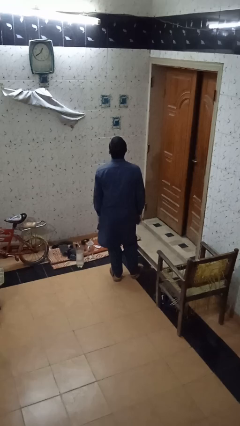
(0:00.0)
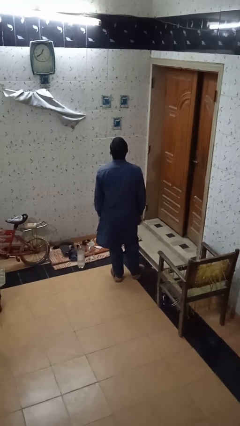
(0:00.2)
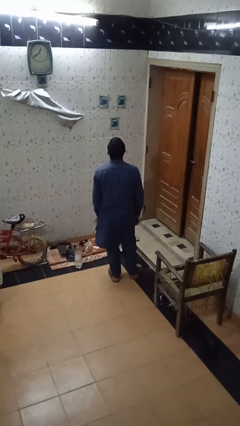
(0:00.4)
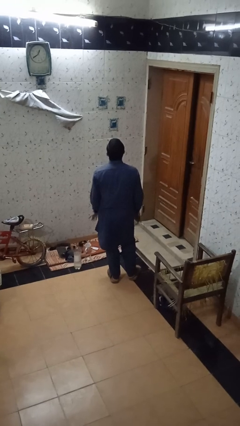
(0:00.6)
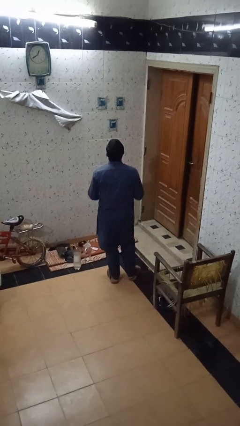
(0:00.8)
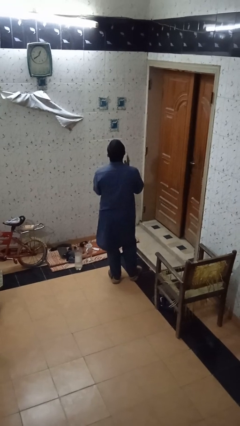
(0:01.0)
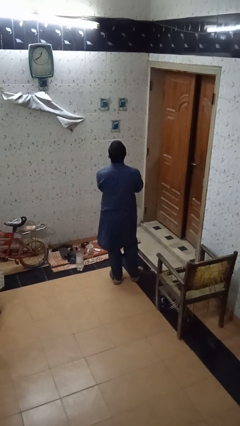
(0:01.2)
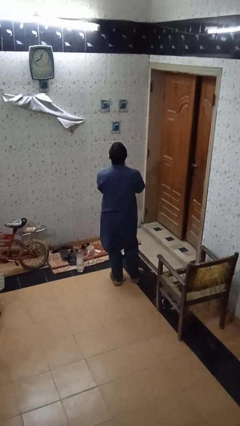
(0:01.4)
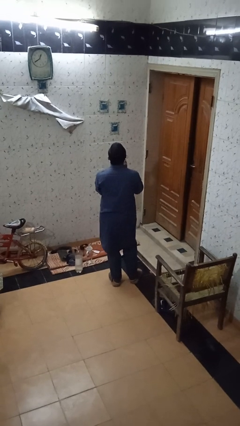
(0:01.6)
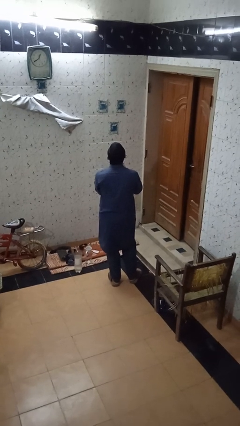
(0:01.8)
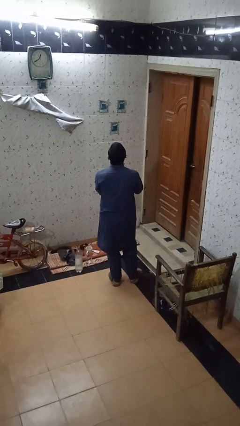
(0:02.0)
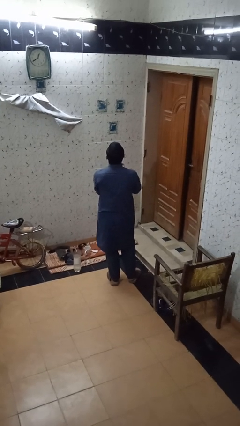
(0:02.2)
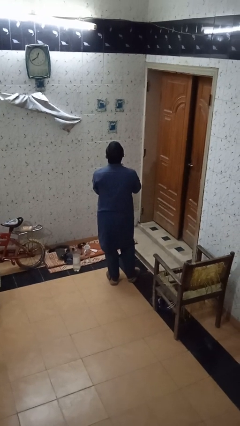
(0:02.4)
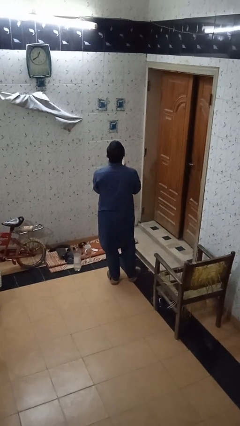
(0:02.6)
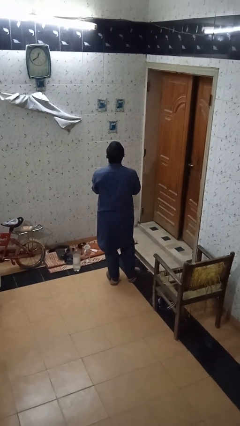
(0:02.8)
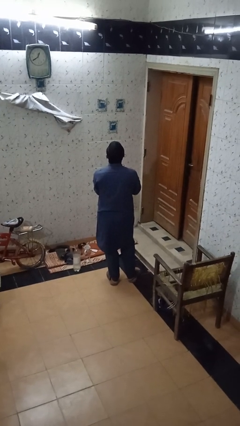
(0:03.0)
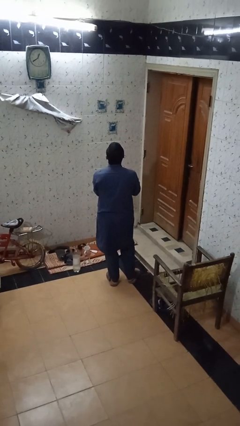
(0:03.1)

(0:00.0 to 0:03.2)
person claps hands

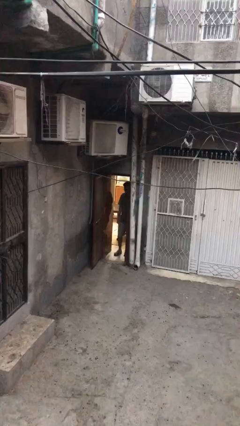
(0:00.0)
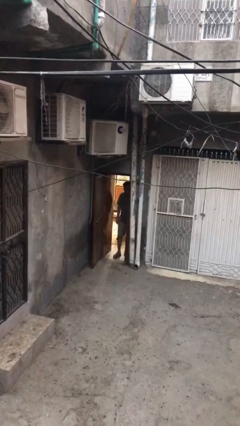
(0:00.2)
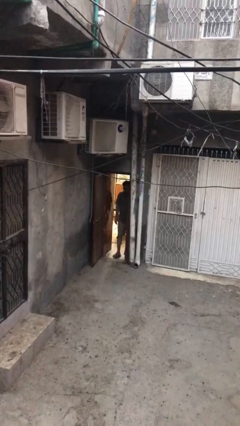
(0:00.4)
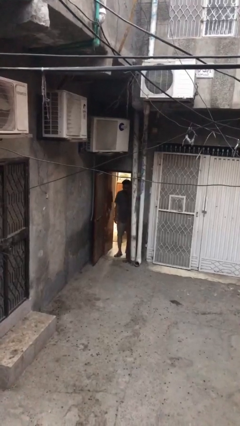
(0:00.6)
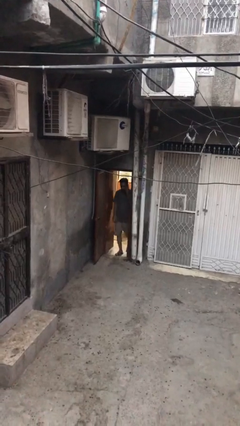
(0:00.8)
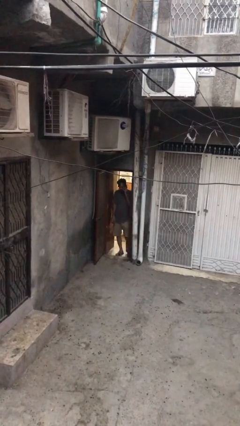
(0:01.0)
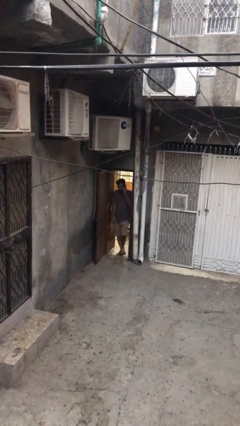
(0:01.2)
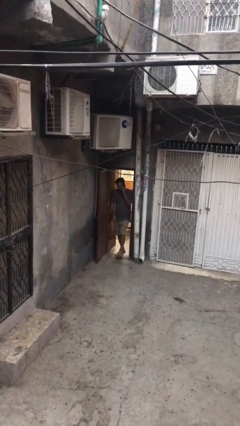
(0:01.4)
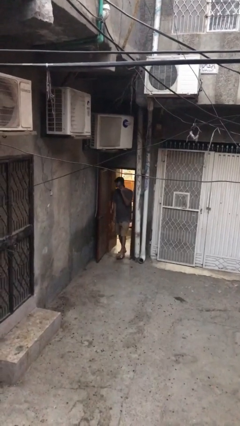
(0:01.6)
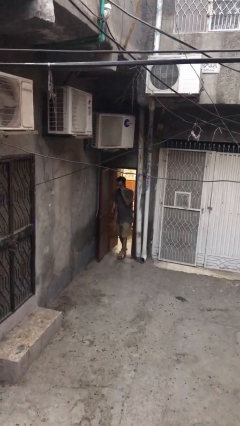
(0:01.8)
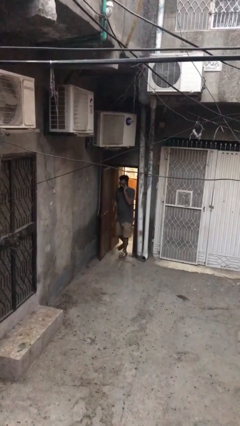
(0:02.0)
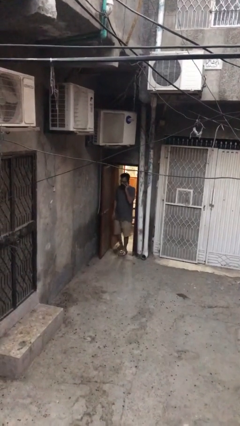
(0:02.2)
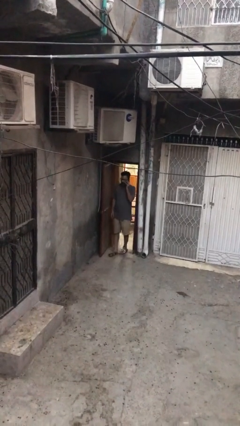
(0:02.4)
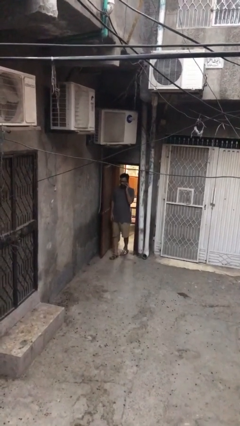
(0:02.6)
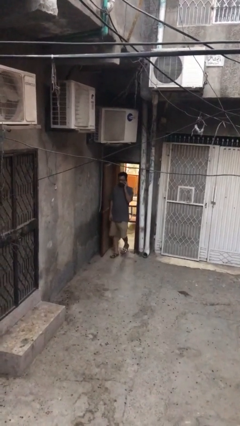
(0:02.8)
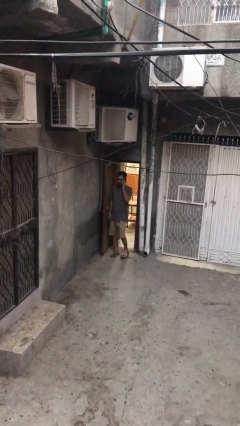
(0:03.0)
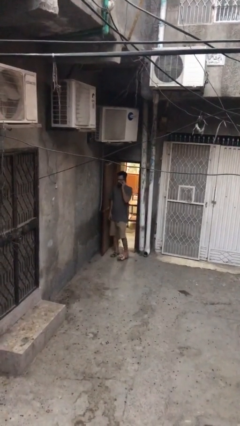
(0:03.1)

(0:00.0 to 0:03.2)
person enters scene through structure

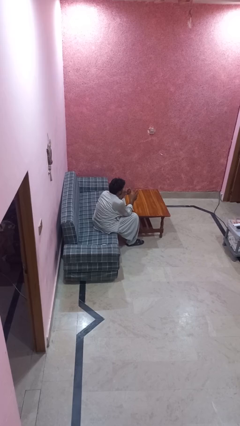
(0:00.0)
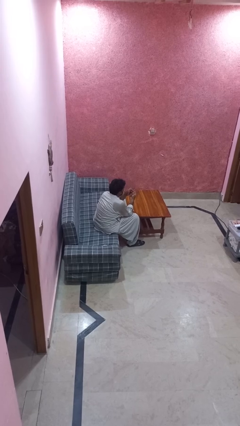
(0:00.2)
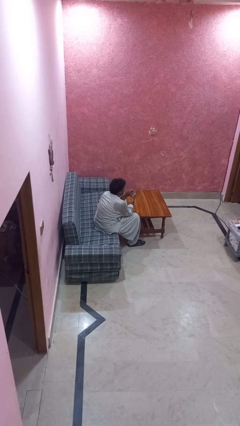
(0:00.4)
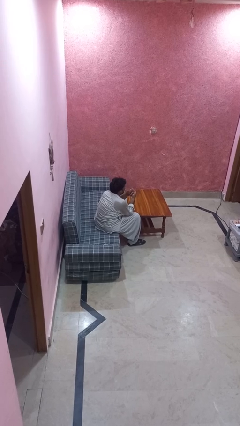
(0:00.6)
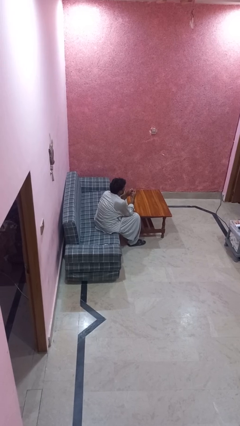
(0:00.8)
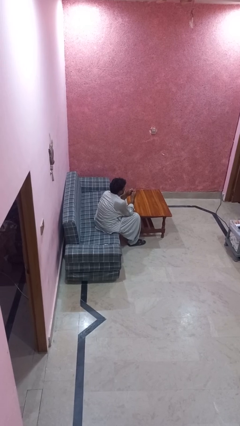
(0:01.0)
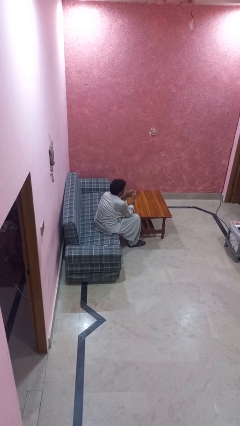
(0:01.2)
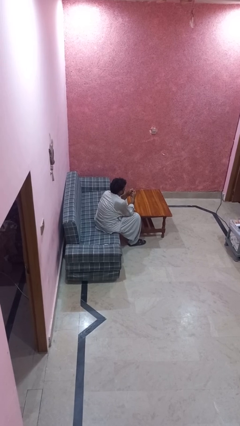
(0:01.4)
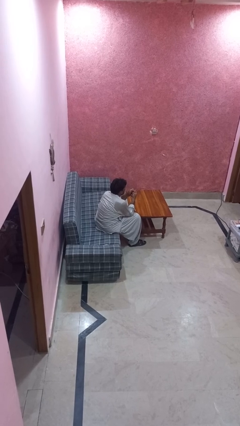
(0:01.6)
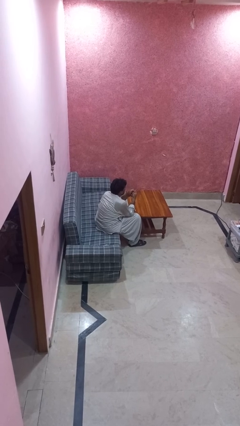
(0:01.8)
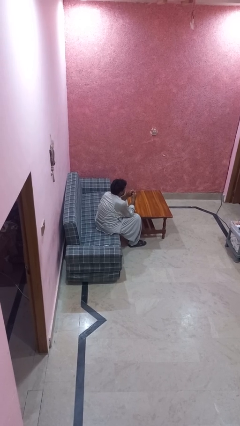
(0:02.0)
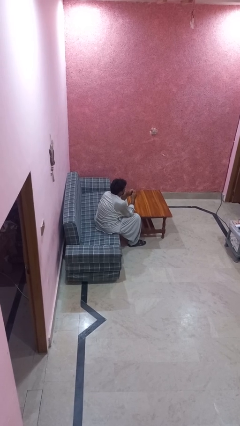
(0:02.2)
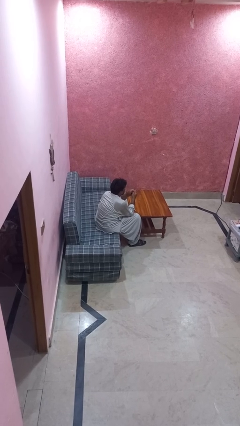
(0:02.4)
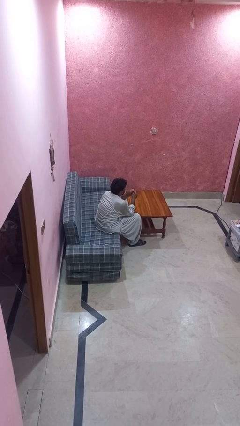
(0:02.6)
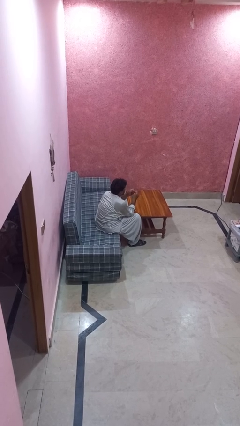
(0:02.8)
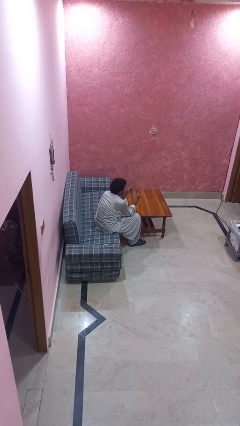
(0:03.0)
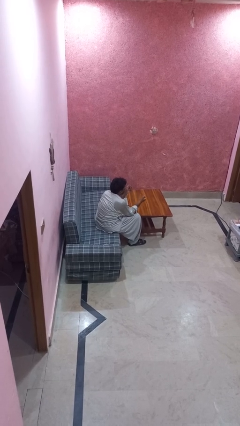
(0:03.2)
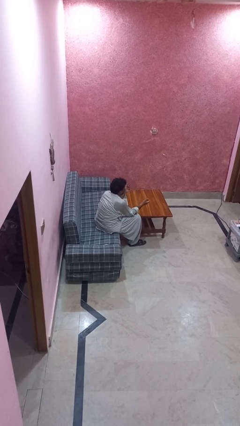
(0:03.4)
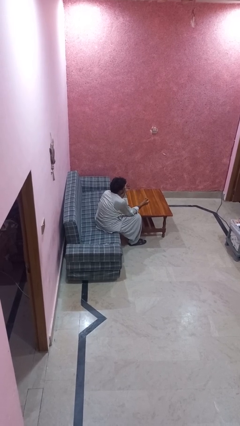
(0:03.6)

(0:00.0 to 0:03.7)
person files fingernails

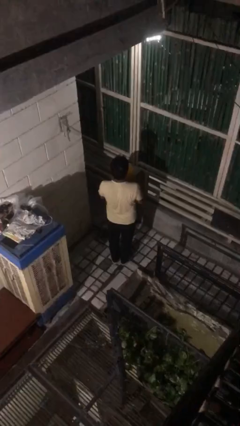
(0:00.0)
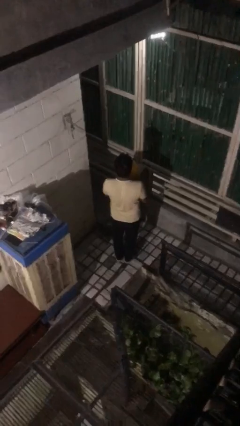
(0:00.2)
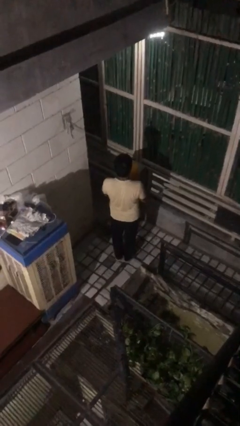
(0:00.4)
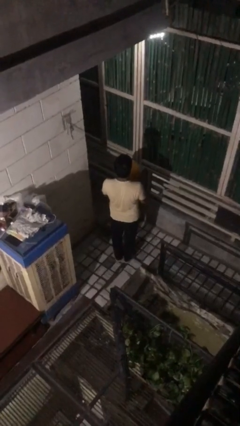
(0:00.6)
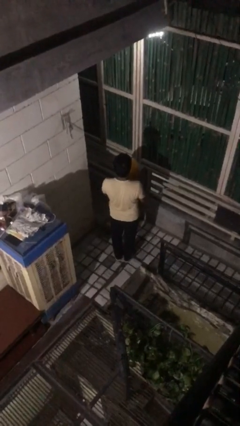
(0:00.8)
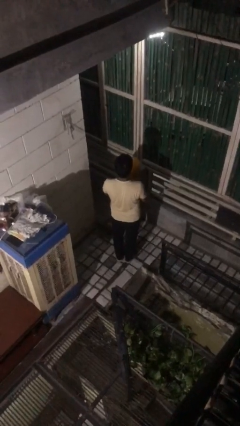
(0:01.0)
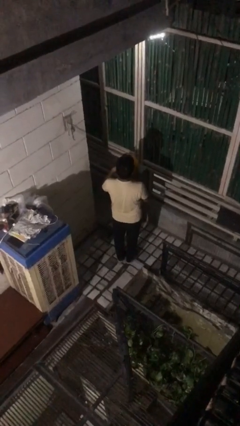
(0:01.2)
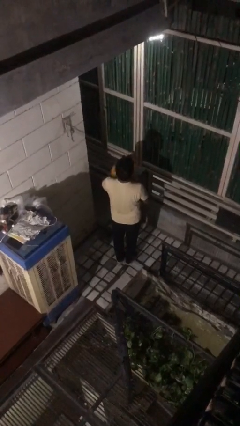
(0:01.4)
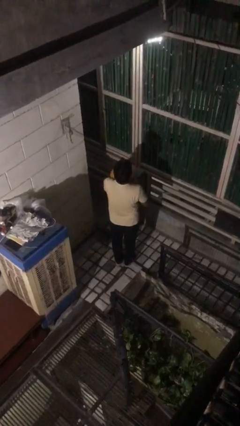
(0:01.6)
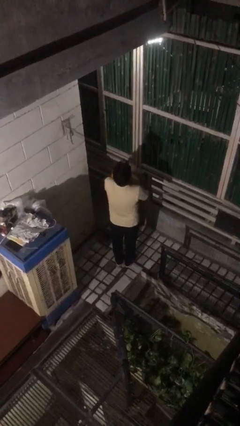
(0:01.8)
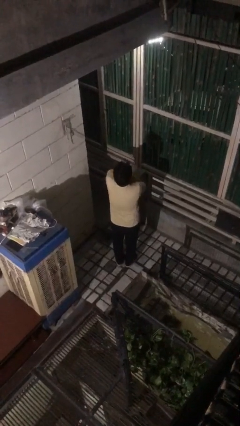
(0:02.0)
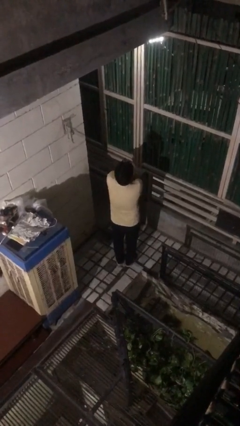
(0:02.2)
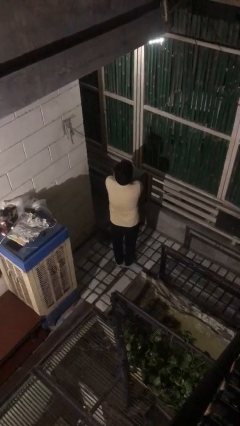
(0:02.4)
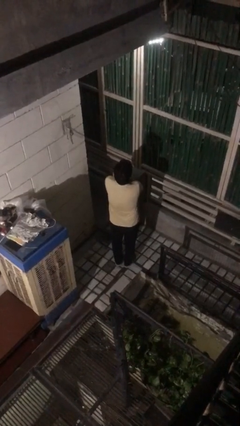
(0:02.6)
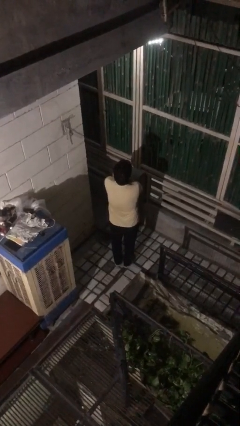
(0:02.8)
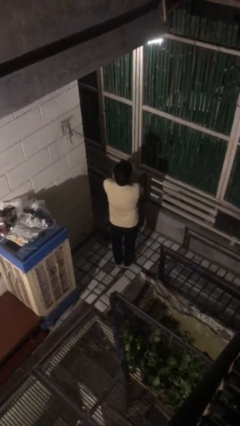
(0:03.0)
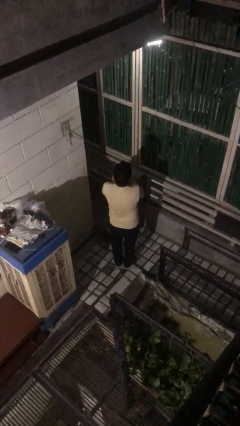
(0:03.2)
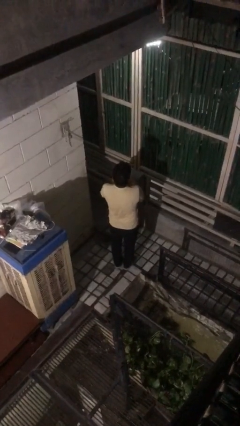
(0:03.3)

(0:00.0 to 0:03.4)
person hugs stuffed animal

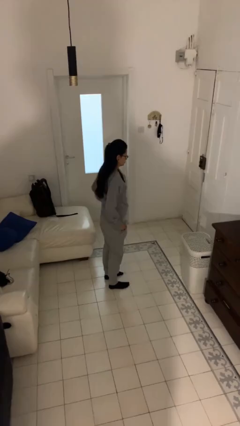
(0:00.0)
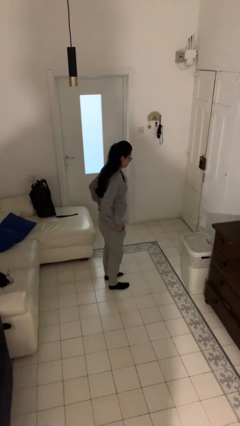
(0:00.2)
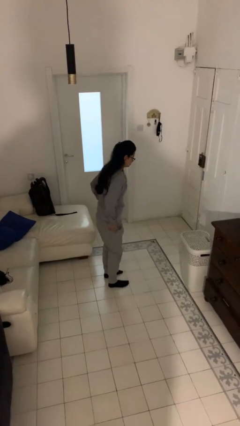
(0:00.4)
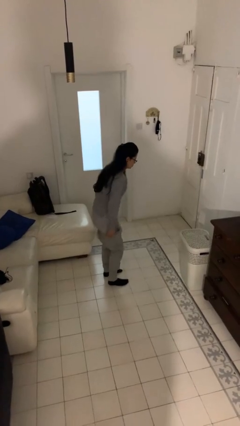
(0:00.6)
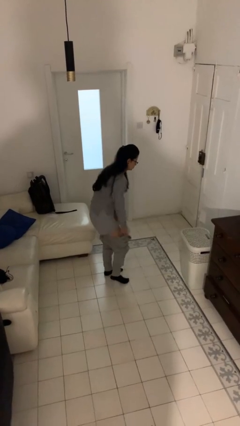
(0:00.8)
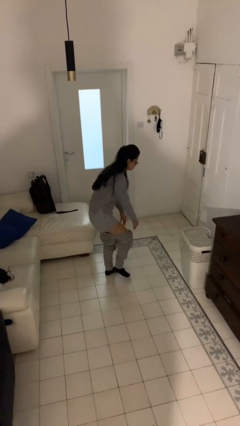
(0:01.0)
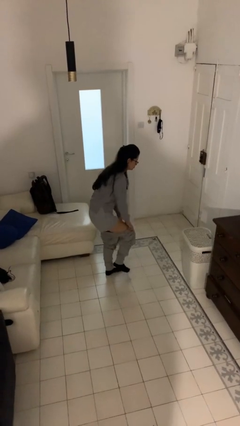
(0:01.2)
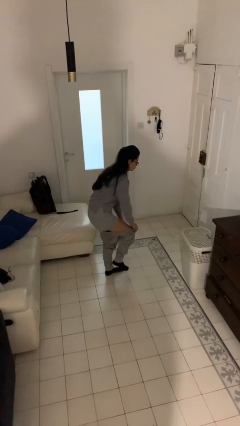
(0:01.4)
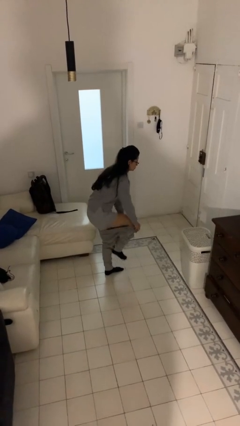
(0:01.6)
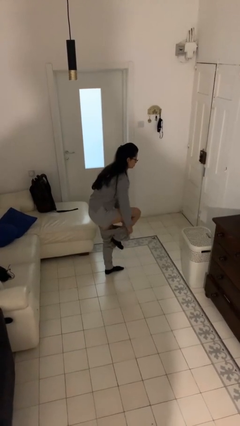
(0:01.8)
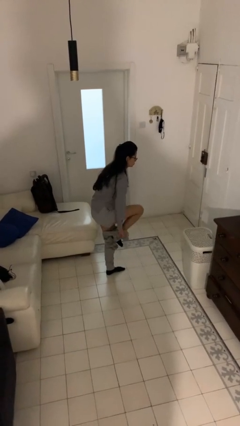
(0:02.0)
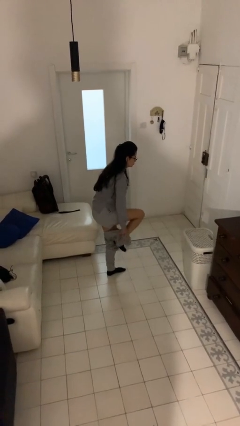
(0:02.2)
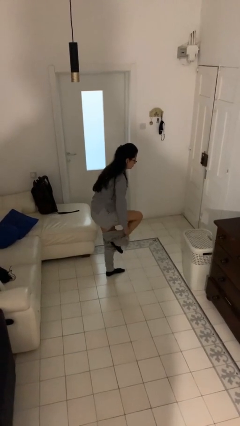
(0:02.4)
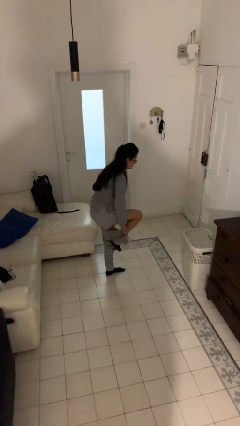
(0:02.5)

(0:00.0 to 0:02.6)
person takes off pants

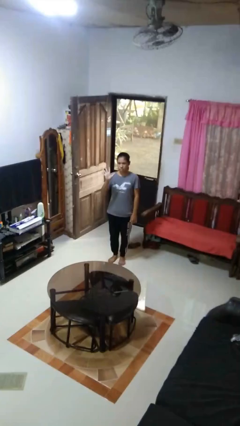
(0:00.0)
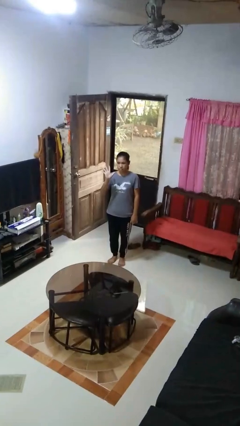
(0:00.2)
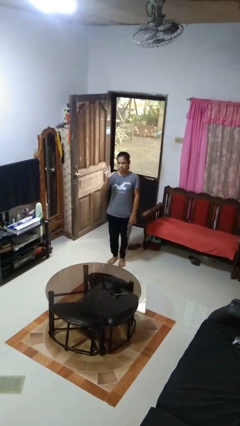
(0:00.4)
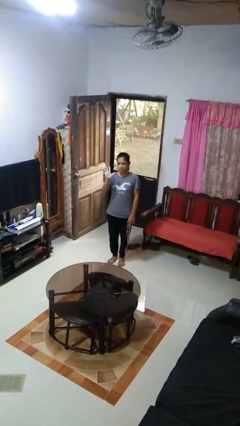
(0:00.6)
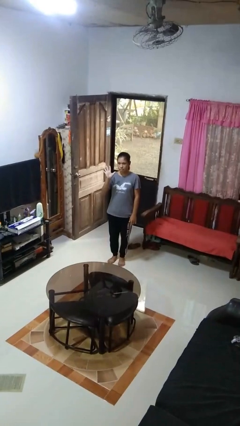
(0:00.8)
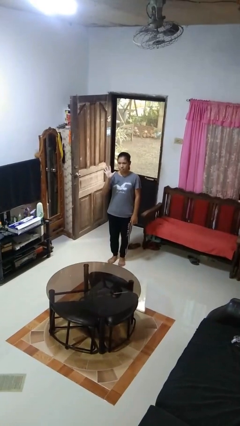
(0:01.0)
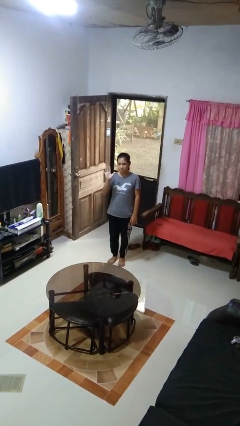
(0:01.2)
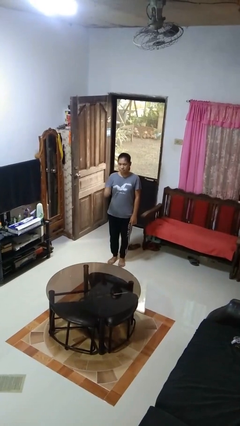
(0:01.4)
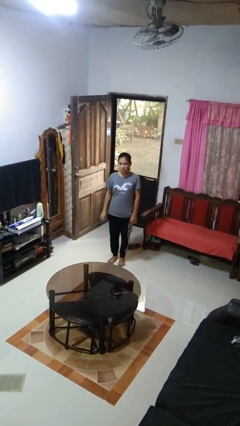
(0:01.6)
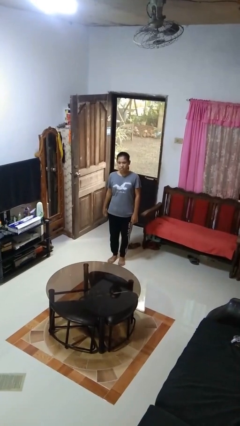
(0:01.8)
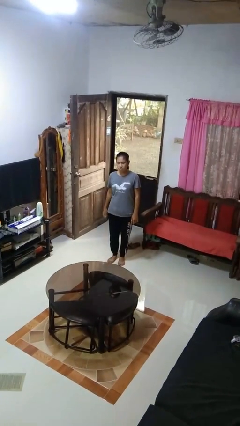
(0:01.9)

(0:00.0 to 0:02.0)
person gestures number five
